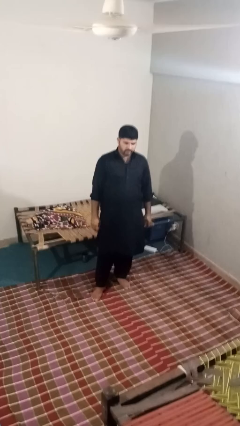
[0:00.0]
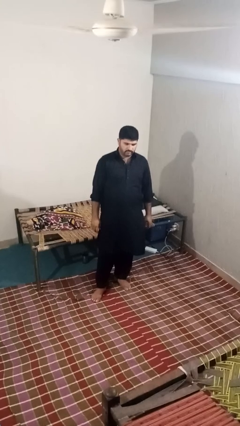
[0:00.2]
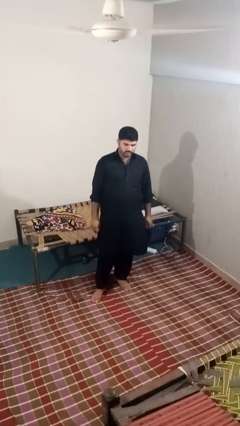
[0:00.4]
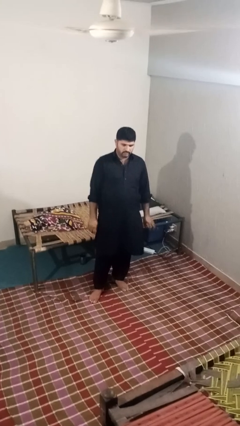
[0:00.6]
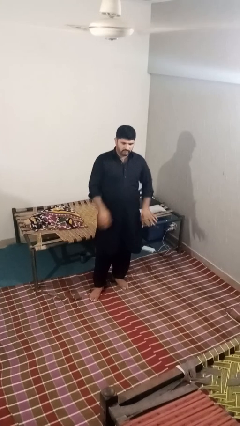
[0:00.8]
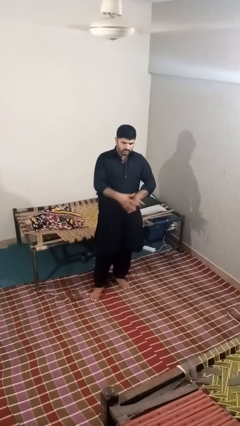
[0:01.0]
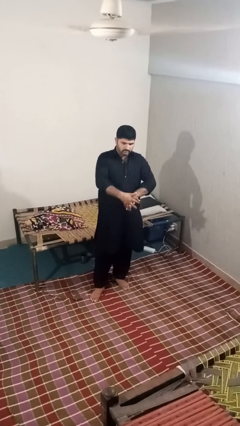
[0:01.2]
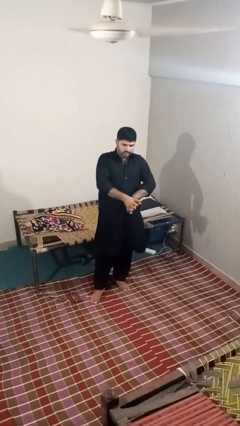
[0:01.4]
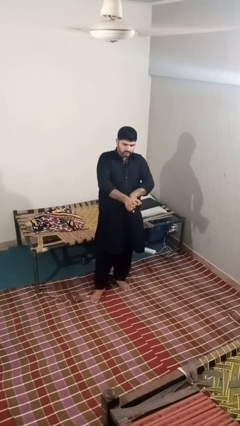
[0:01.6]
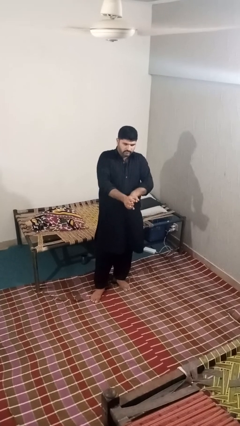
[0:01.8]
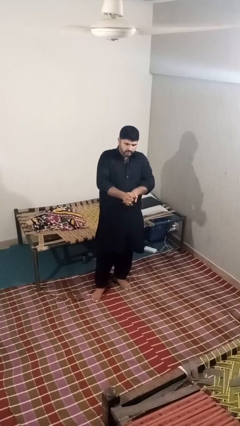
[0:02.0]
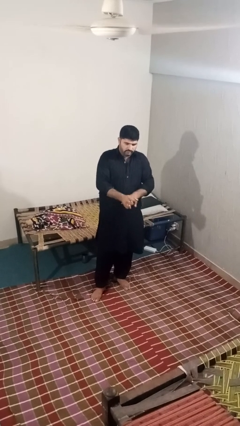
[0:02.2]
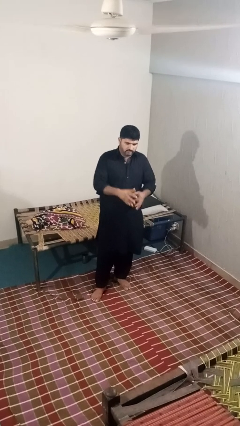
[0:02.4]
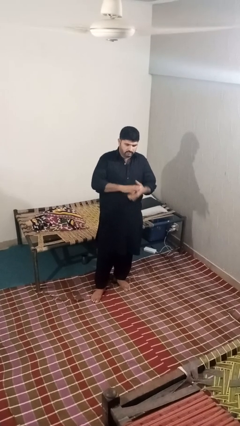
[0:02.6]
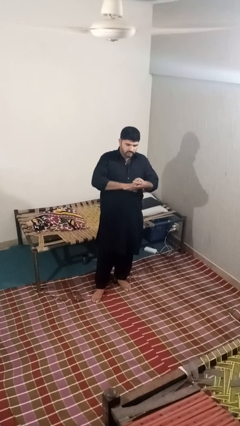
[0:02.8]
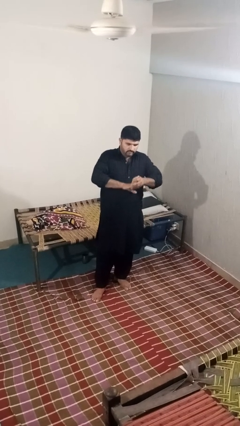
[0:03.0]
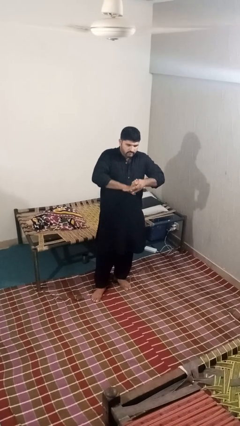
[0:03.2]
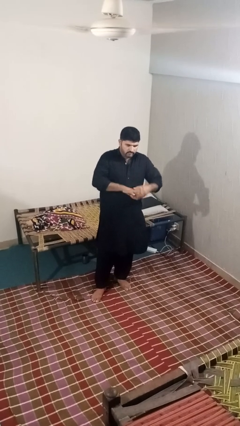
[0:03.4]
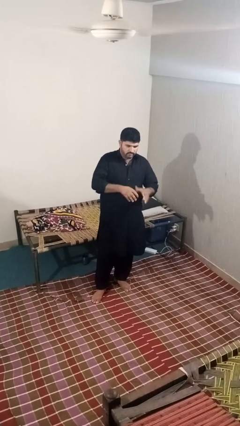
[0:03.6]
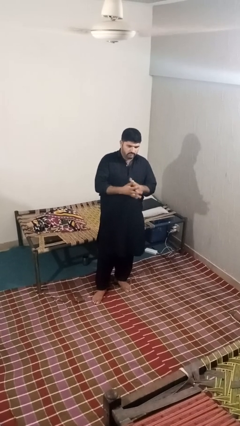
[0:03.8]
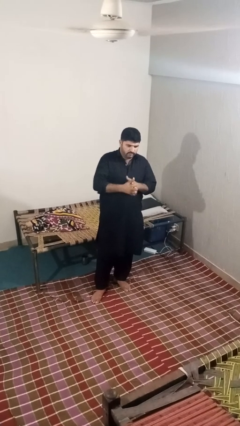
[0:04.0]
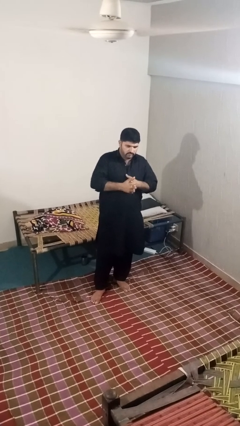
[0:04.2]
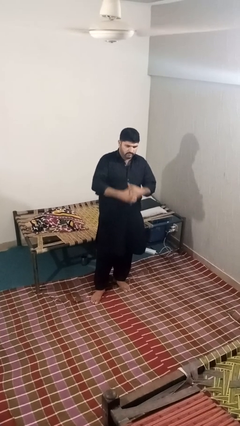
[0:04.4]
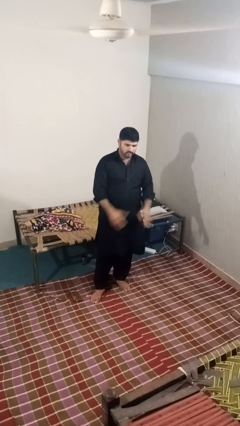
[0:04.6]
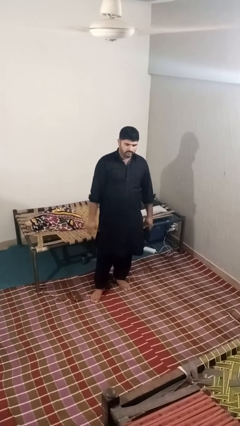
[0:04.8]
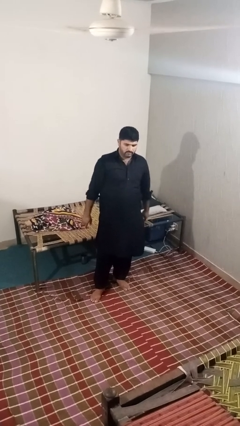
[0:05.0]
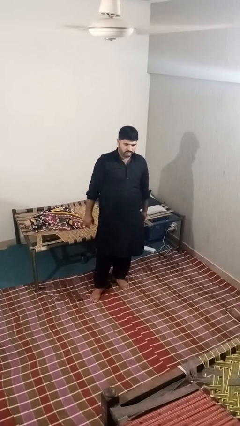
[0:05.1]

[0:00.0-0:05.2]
person cracks knuckles

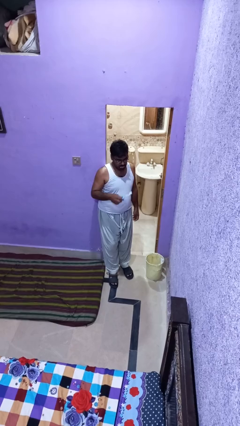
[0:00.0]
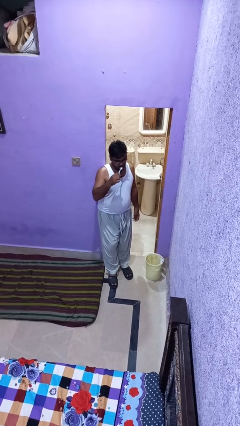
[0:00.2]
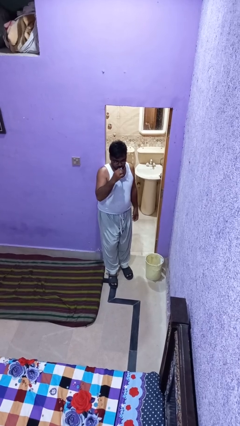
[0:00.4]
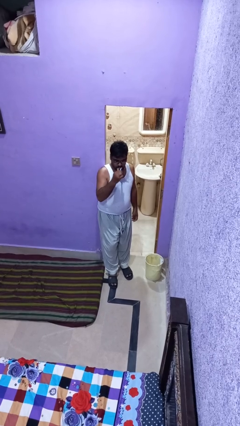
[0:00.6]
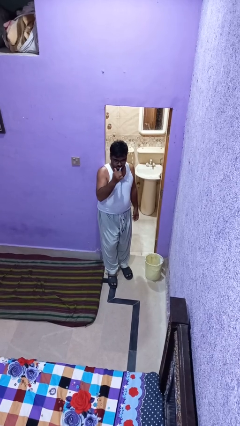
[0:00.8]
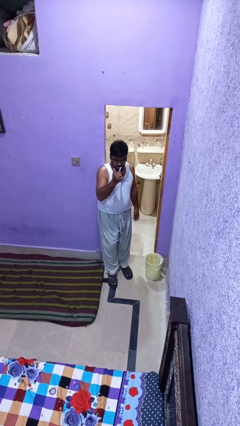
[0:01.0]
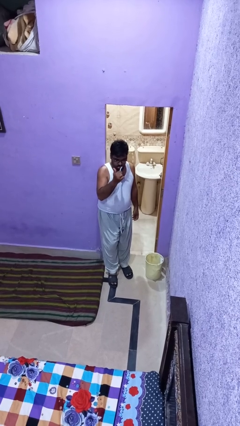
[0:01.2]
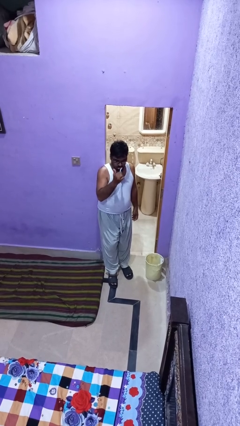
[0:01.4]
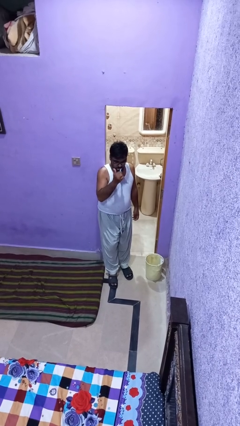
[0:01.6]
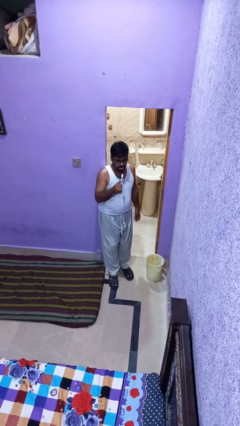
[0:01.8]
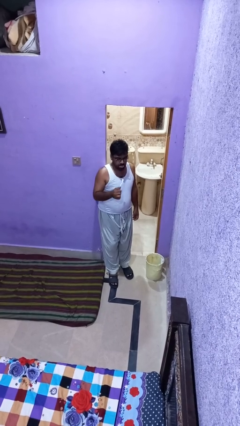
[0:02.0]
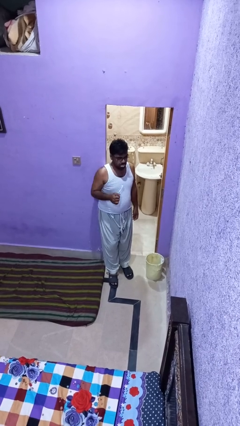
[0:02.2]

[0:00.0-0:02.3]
person brushes teeth

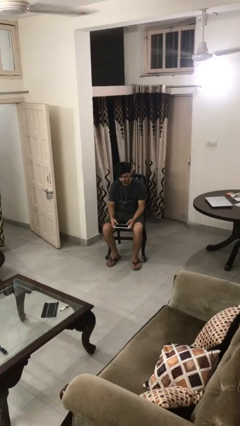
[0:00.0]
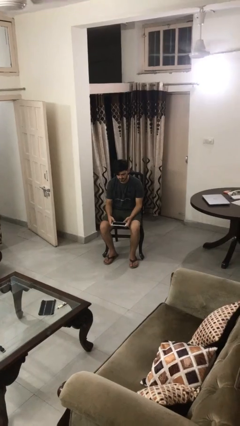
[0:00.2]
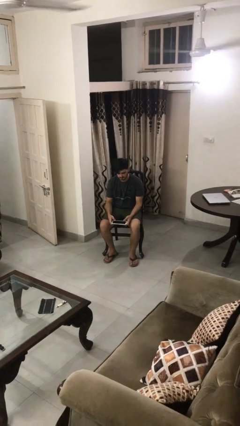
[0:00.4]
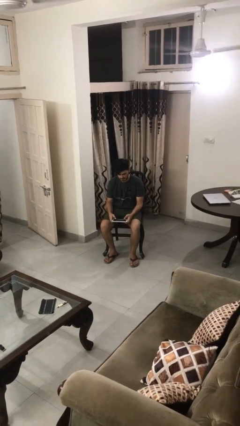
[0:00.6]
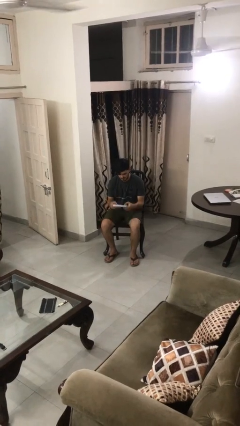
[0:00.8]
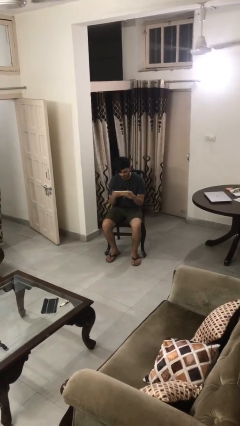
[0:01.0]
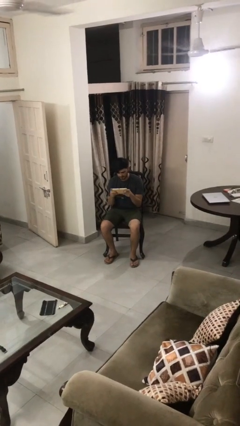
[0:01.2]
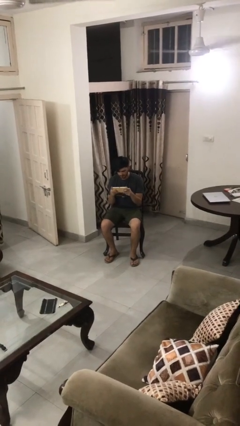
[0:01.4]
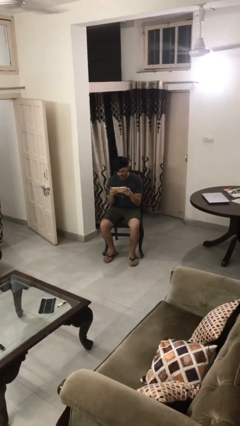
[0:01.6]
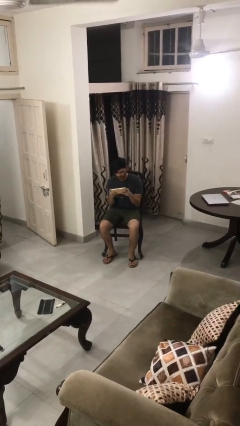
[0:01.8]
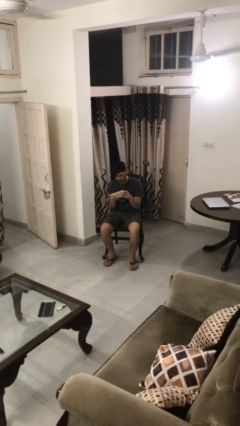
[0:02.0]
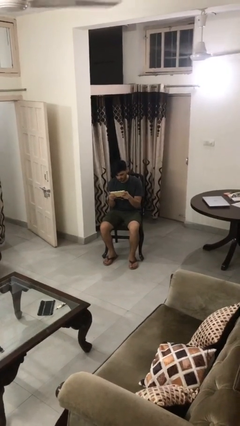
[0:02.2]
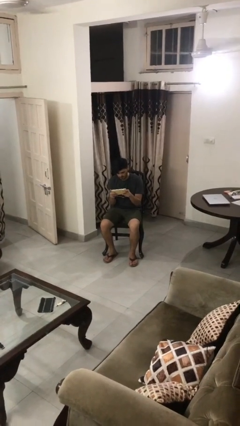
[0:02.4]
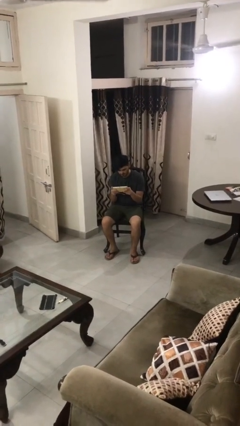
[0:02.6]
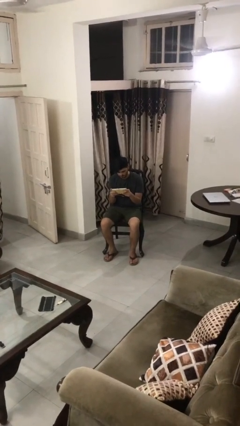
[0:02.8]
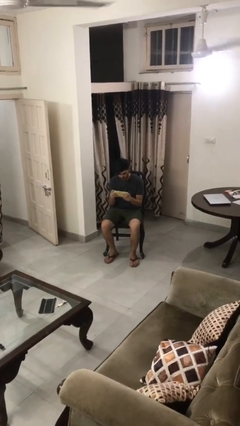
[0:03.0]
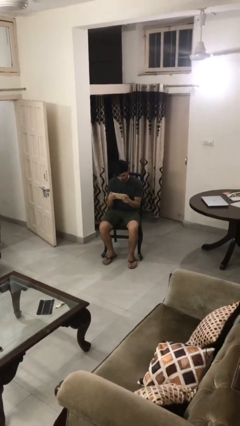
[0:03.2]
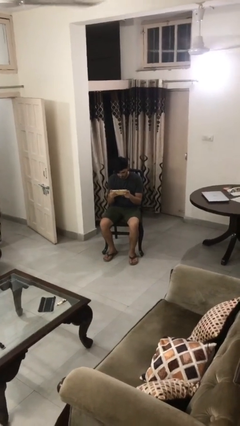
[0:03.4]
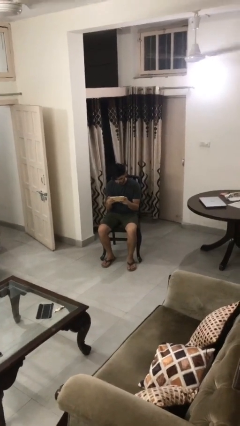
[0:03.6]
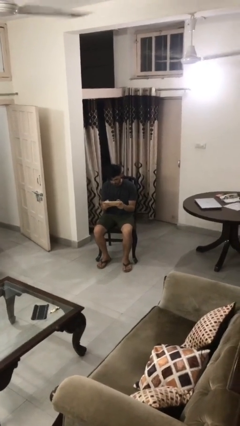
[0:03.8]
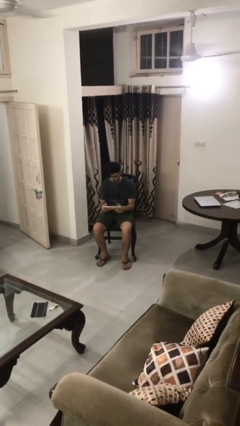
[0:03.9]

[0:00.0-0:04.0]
person interacts with handheld game

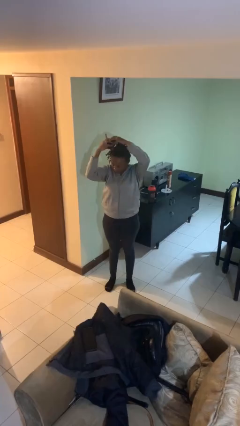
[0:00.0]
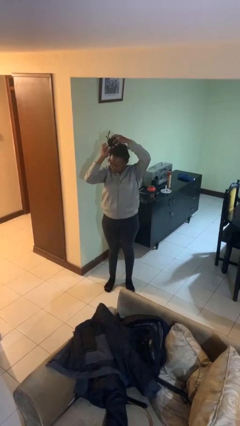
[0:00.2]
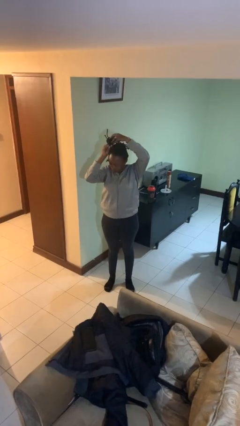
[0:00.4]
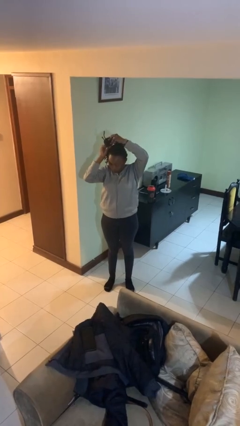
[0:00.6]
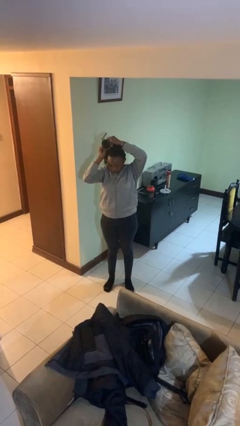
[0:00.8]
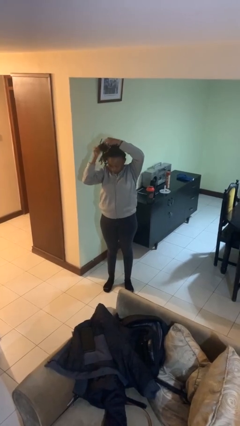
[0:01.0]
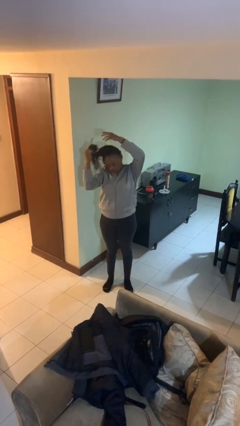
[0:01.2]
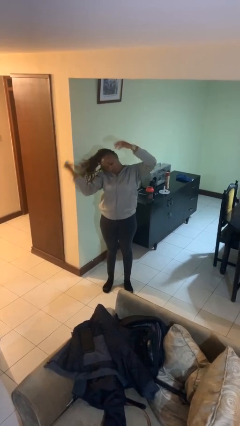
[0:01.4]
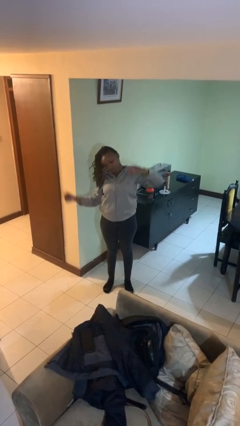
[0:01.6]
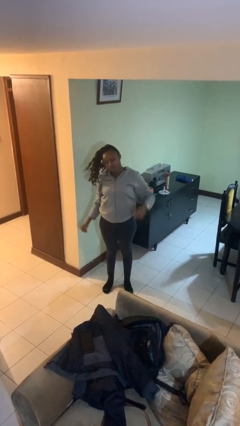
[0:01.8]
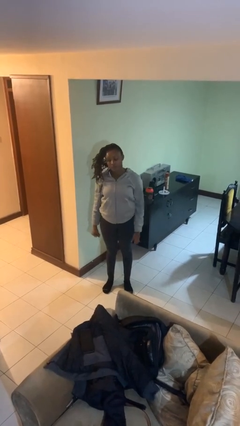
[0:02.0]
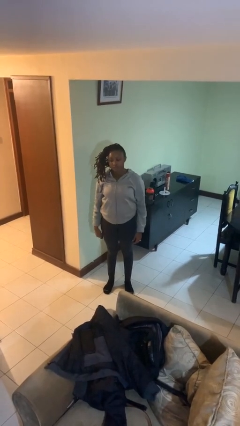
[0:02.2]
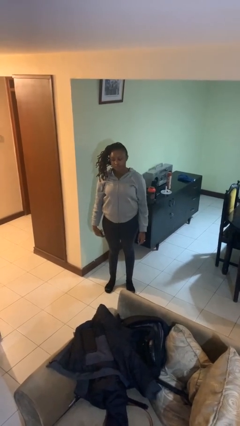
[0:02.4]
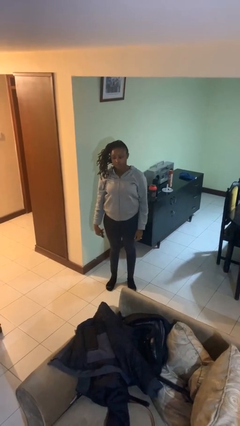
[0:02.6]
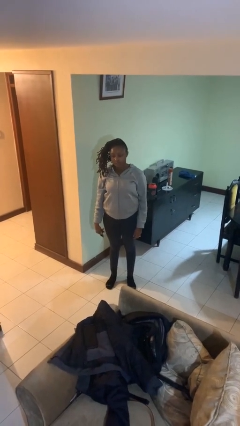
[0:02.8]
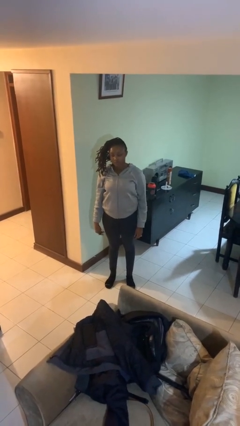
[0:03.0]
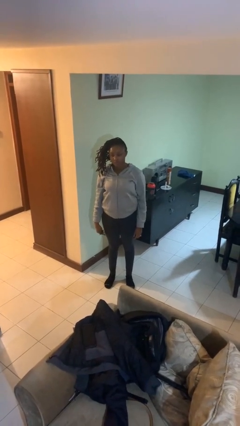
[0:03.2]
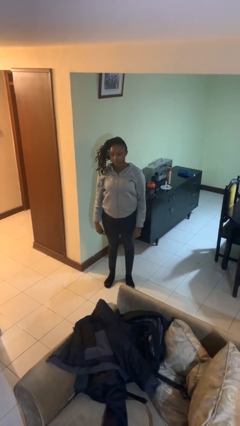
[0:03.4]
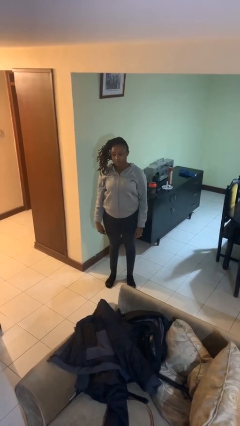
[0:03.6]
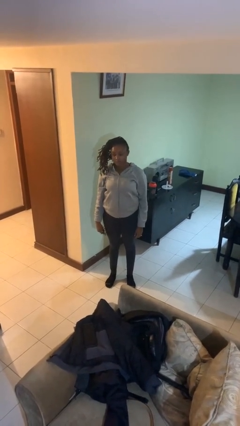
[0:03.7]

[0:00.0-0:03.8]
person takes off hairtie

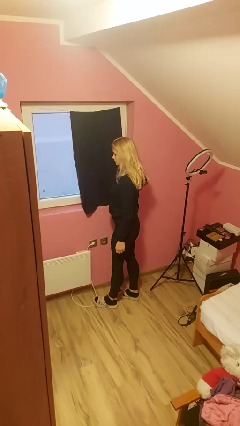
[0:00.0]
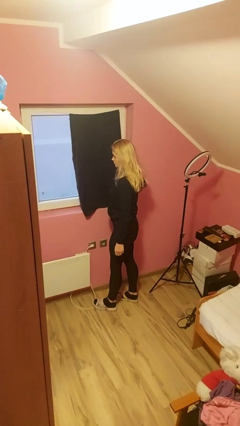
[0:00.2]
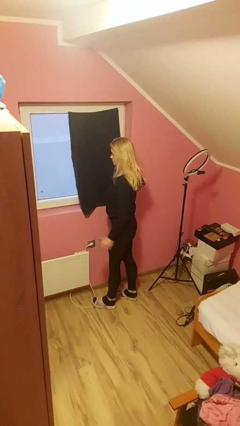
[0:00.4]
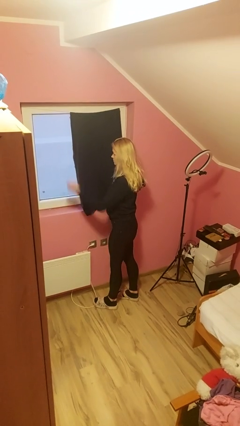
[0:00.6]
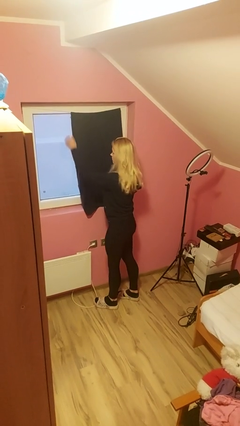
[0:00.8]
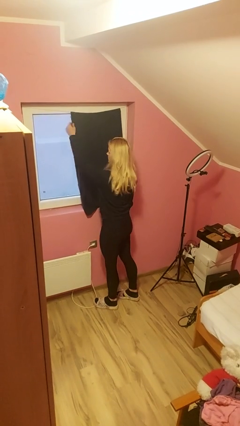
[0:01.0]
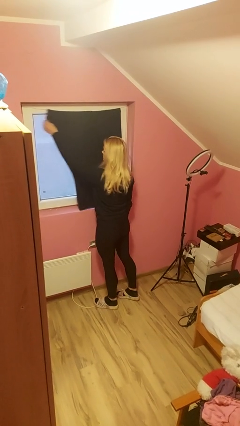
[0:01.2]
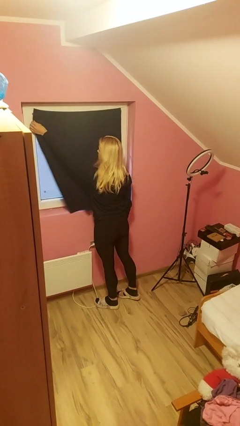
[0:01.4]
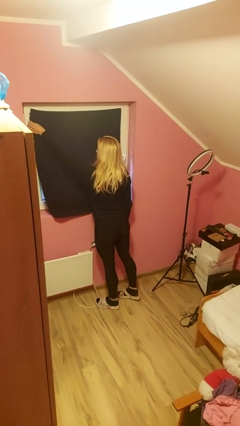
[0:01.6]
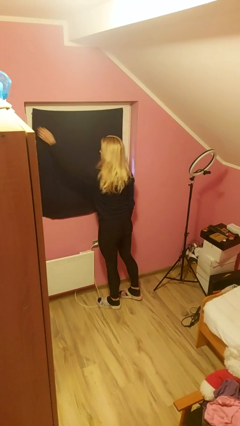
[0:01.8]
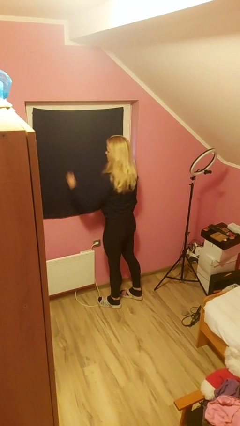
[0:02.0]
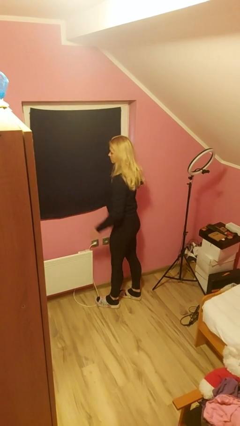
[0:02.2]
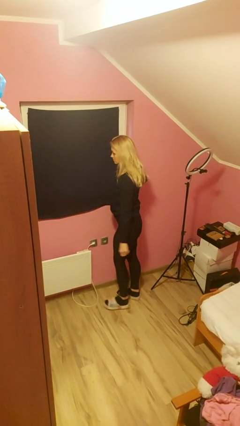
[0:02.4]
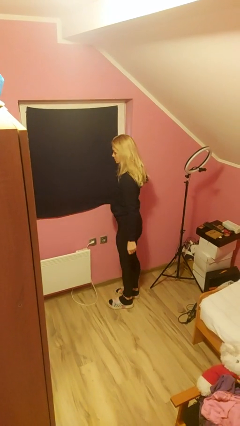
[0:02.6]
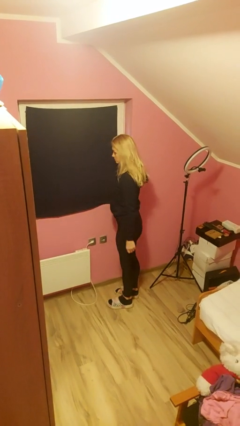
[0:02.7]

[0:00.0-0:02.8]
person closes curtains
